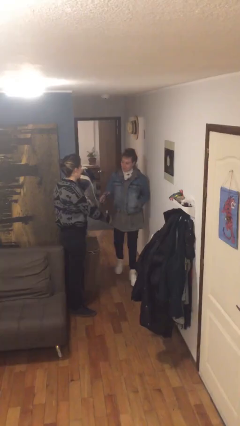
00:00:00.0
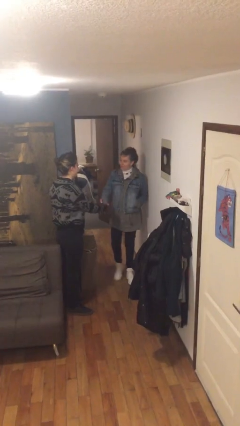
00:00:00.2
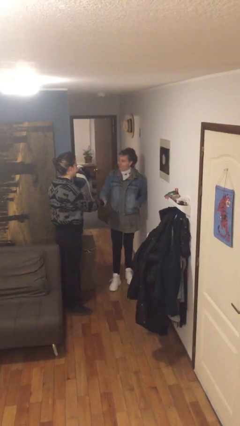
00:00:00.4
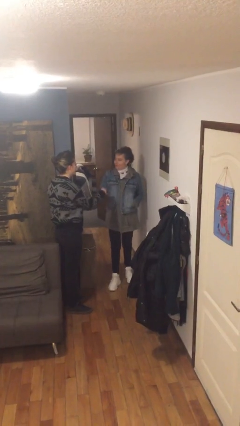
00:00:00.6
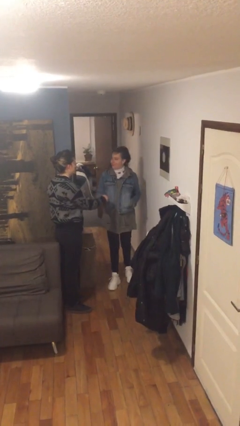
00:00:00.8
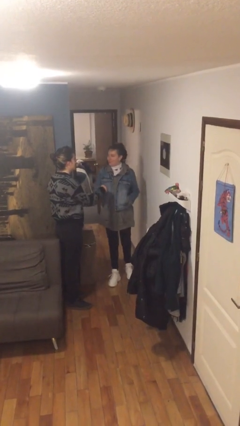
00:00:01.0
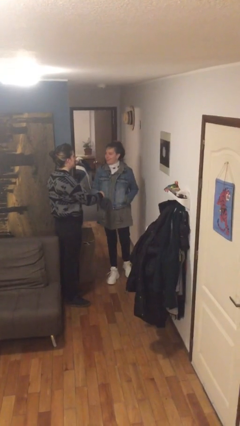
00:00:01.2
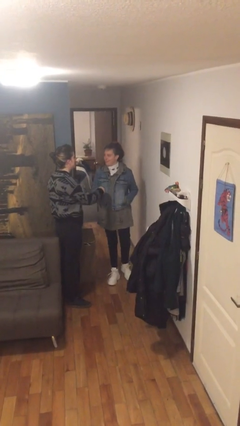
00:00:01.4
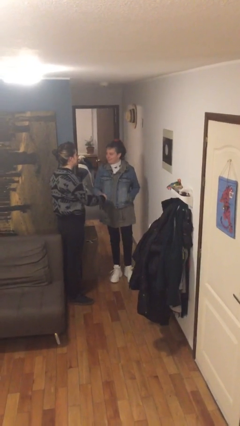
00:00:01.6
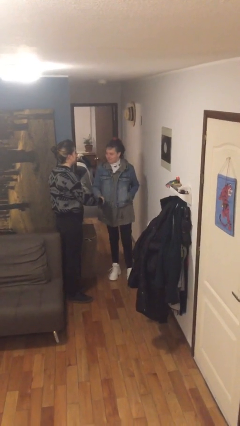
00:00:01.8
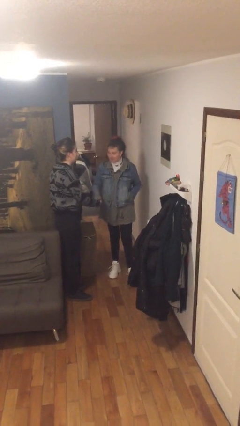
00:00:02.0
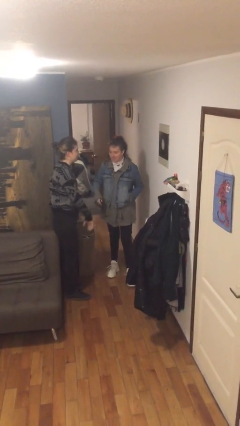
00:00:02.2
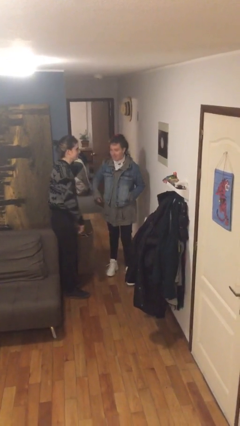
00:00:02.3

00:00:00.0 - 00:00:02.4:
person shakes hand

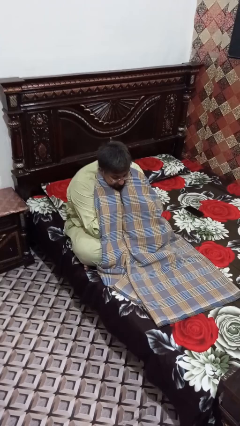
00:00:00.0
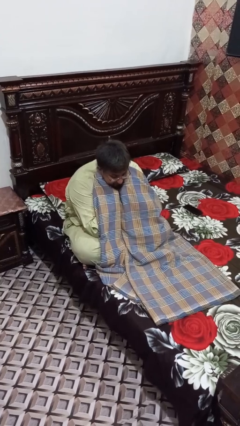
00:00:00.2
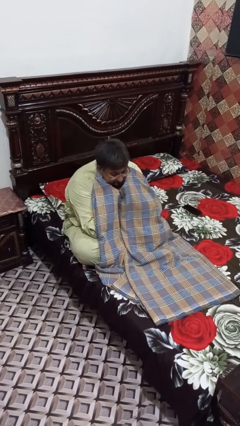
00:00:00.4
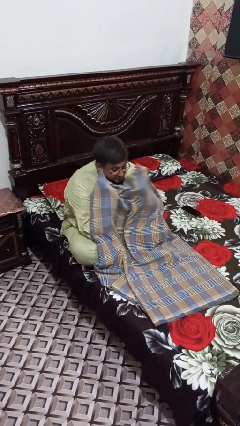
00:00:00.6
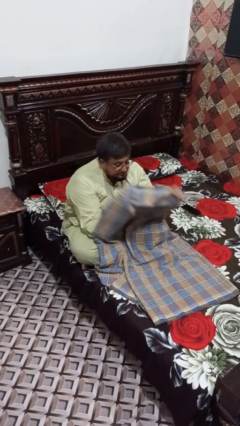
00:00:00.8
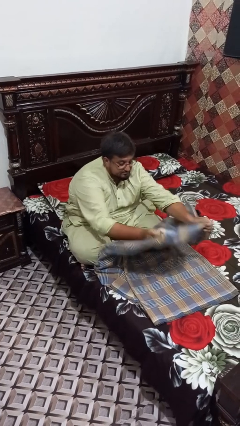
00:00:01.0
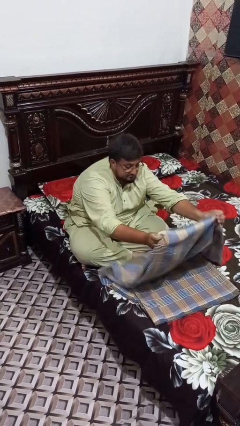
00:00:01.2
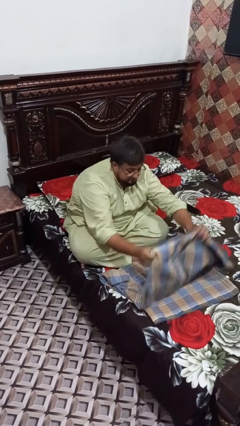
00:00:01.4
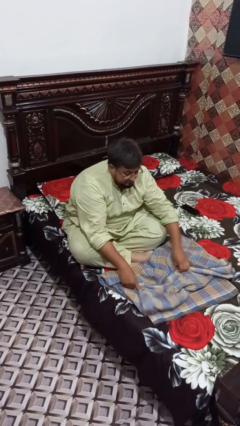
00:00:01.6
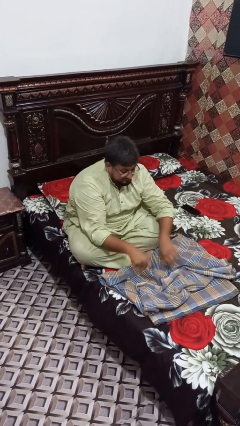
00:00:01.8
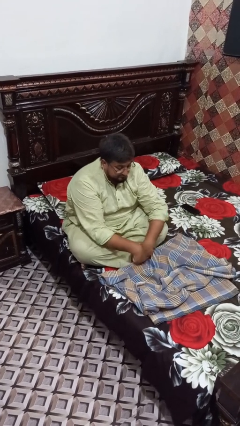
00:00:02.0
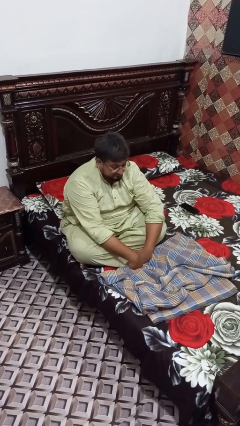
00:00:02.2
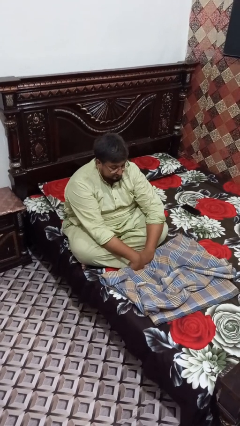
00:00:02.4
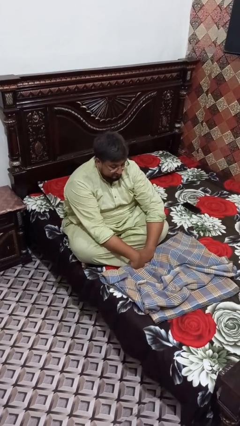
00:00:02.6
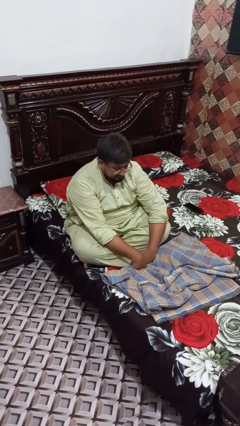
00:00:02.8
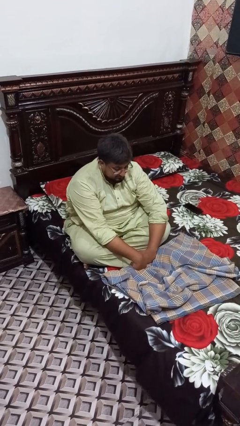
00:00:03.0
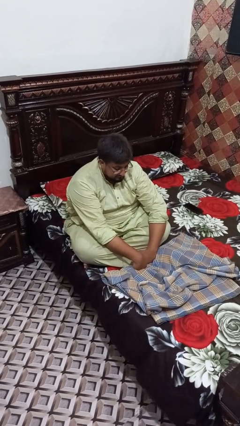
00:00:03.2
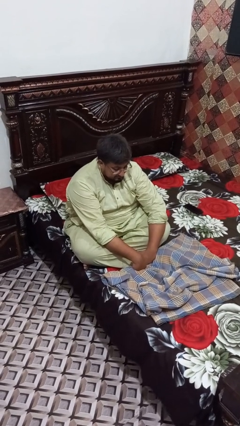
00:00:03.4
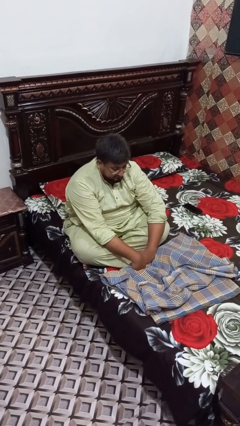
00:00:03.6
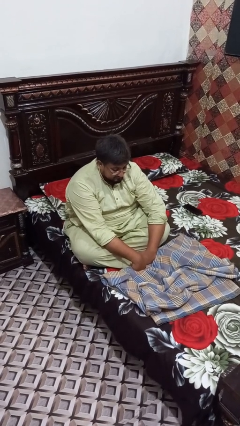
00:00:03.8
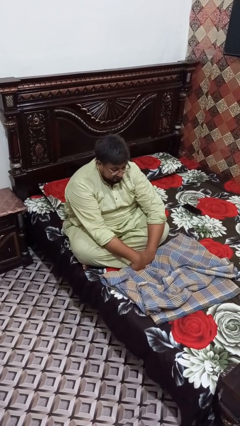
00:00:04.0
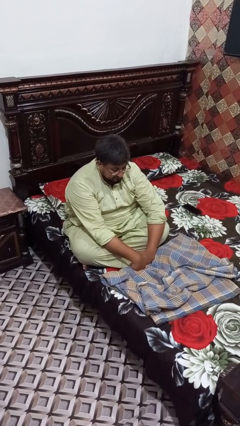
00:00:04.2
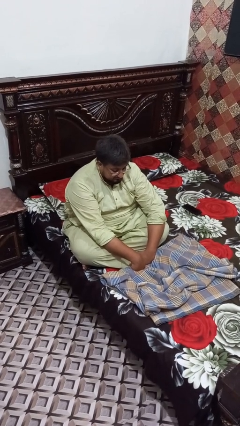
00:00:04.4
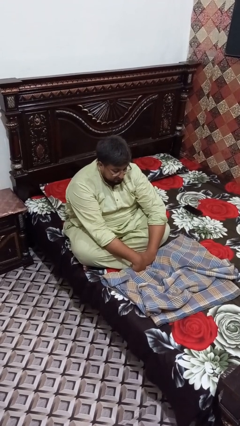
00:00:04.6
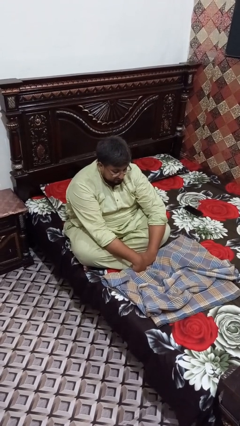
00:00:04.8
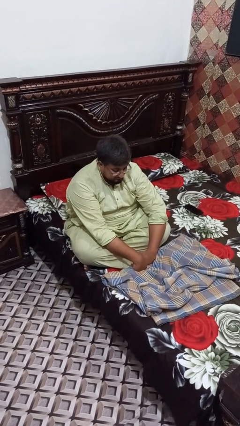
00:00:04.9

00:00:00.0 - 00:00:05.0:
person uncovers with blanket

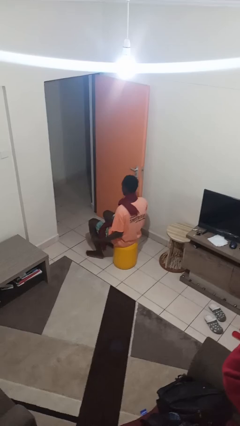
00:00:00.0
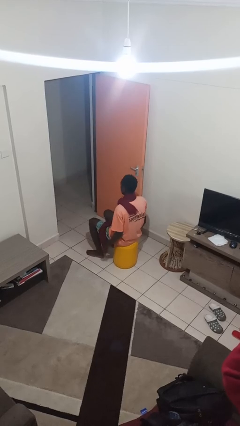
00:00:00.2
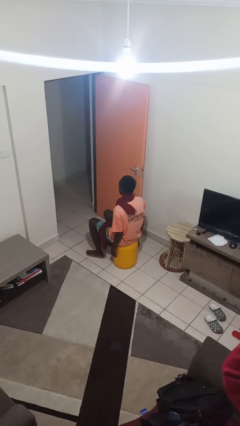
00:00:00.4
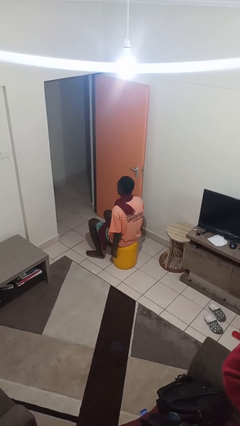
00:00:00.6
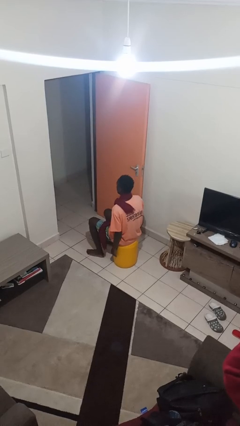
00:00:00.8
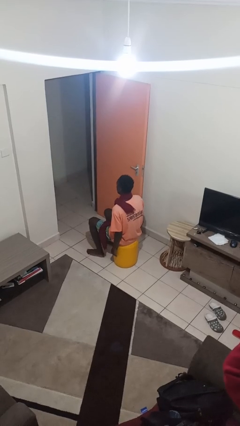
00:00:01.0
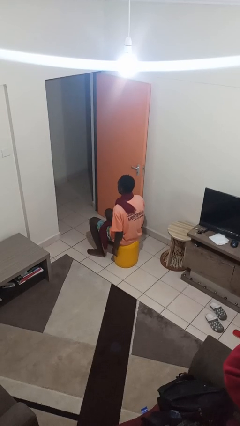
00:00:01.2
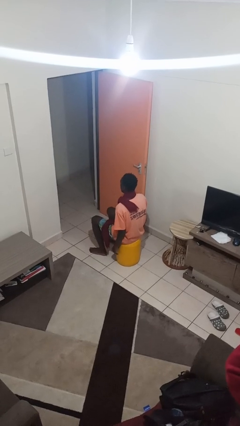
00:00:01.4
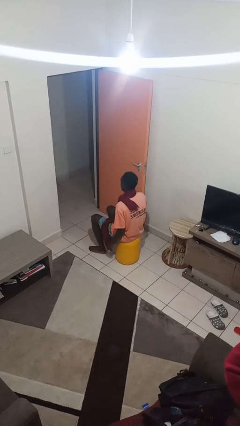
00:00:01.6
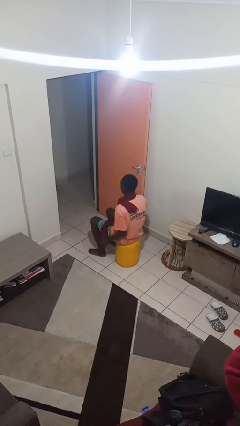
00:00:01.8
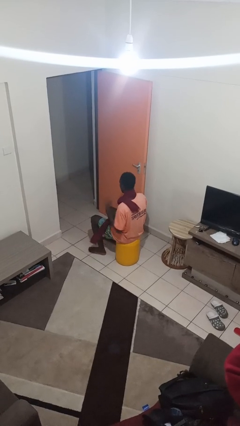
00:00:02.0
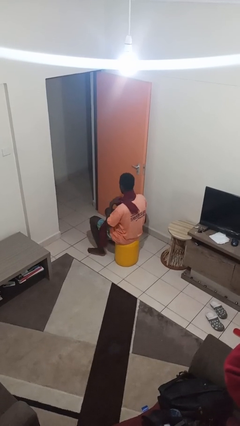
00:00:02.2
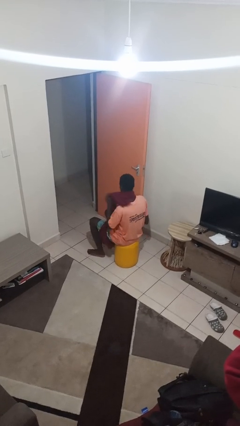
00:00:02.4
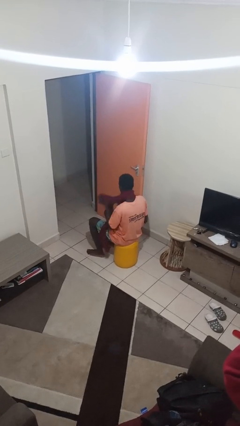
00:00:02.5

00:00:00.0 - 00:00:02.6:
person puts on scarf

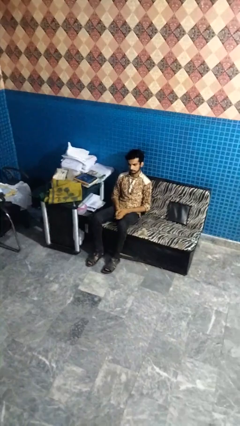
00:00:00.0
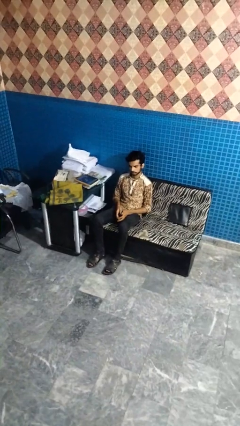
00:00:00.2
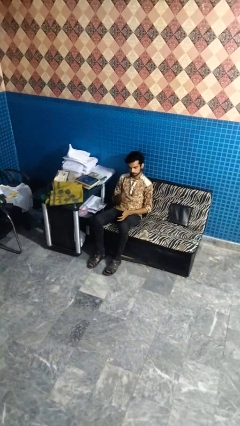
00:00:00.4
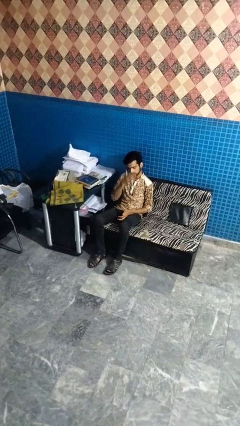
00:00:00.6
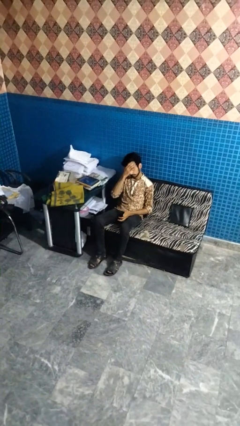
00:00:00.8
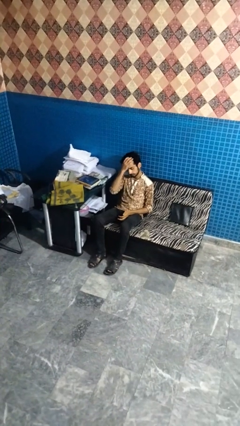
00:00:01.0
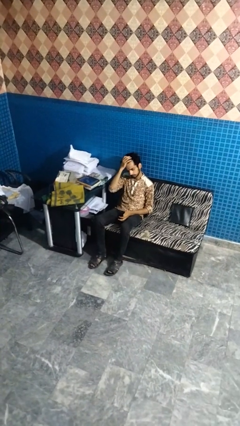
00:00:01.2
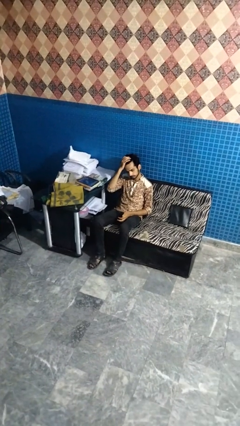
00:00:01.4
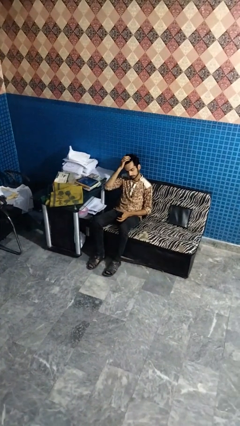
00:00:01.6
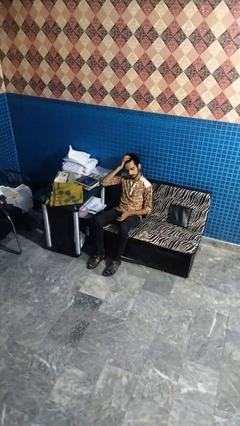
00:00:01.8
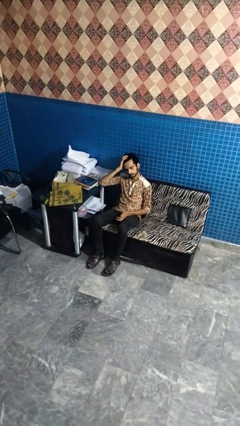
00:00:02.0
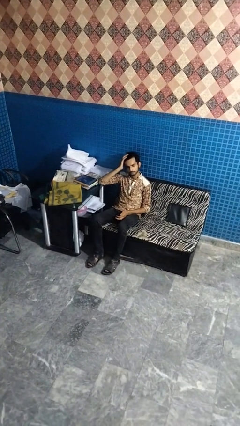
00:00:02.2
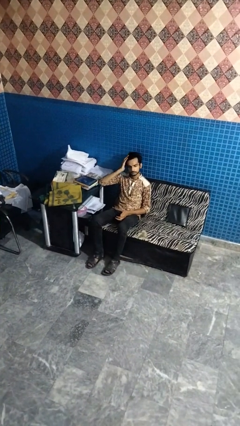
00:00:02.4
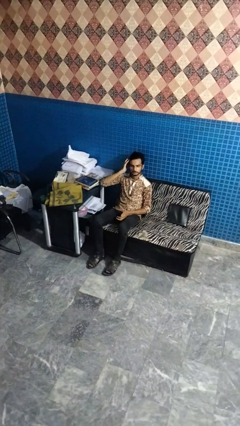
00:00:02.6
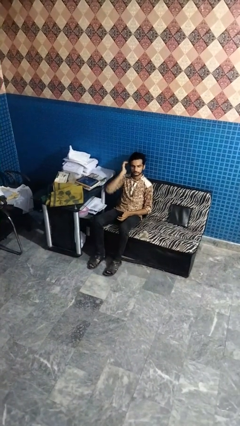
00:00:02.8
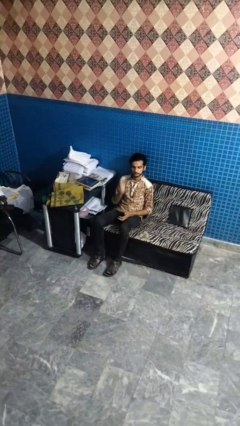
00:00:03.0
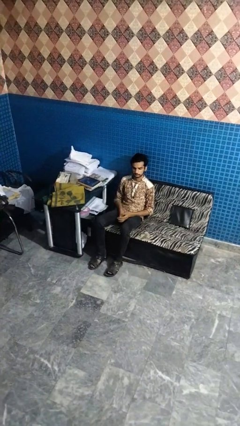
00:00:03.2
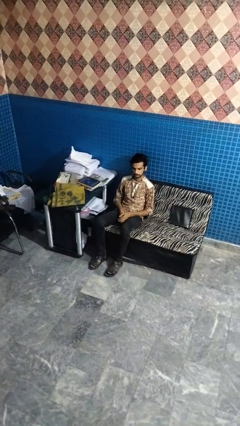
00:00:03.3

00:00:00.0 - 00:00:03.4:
person strokes hair

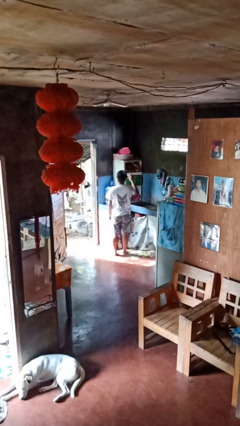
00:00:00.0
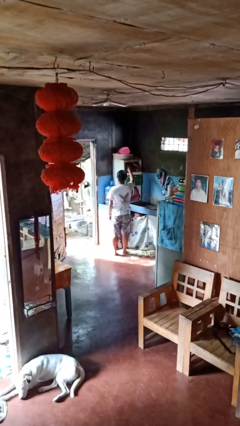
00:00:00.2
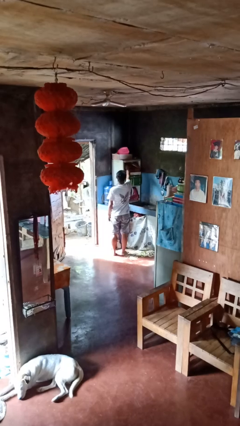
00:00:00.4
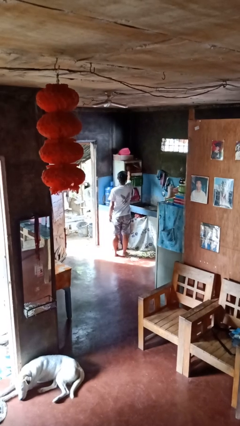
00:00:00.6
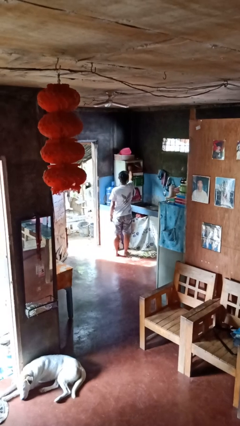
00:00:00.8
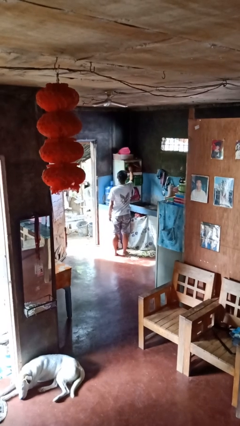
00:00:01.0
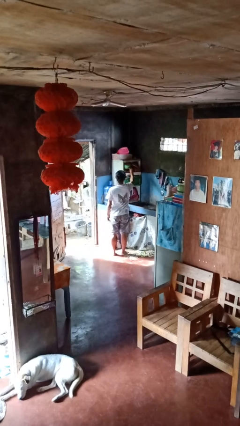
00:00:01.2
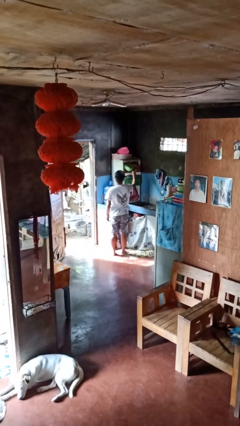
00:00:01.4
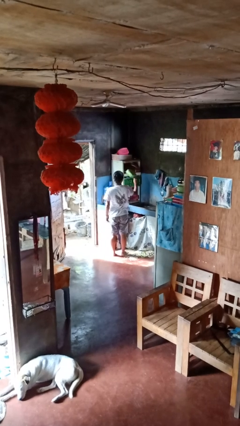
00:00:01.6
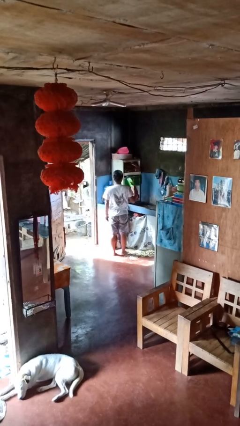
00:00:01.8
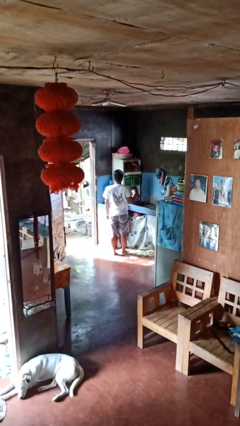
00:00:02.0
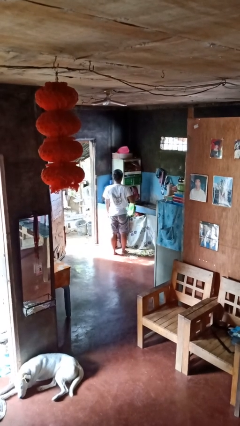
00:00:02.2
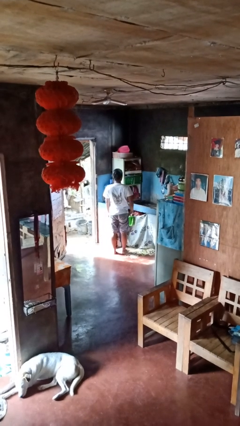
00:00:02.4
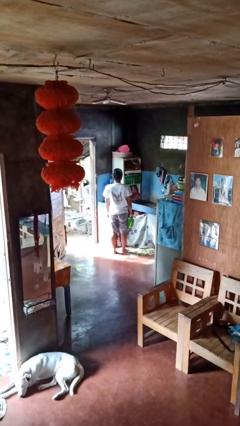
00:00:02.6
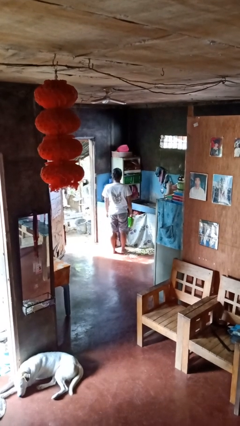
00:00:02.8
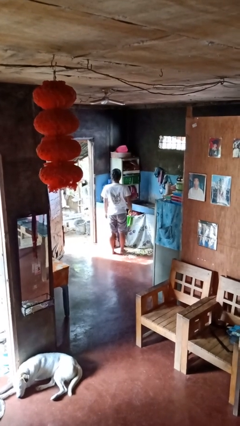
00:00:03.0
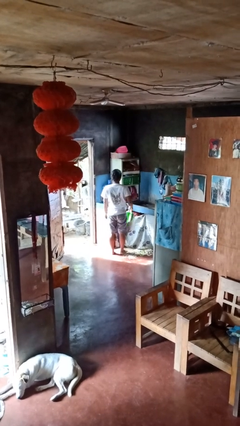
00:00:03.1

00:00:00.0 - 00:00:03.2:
person takes object from cabinet

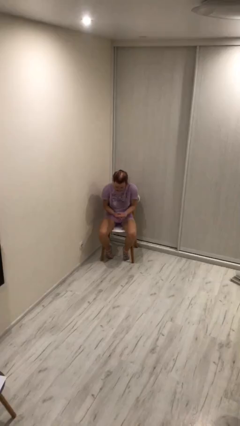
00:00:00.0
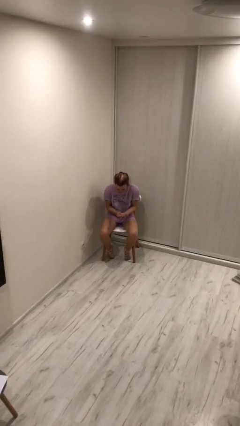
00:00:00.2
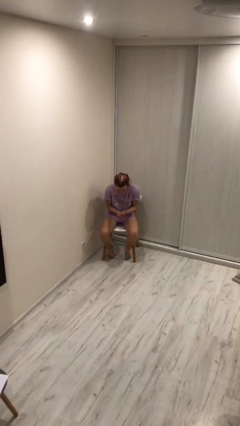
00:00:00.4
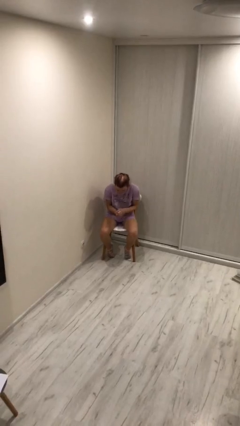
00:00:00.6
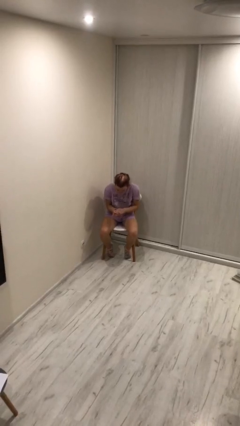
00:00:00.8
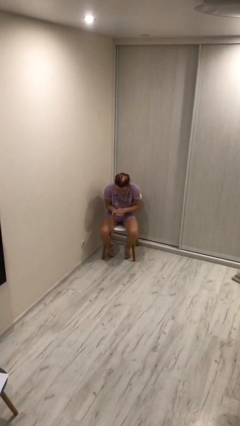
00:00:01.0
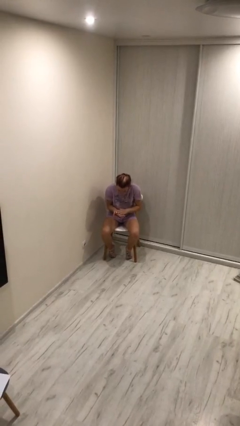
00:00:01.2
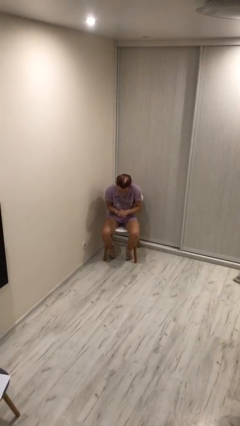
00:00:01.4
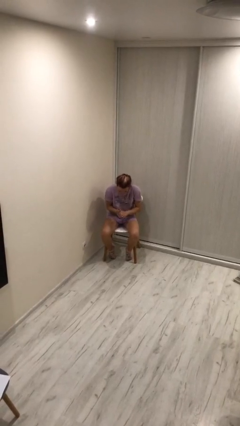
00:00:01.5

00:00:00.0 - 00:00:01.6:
person looks at hands in lap
